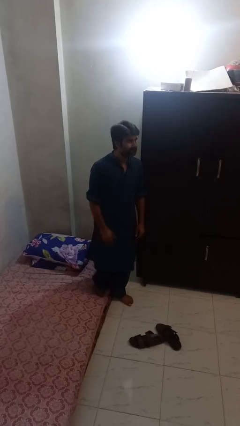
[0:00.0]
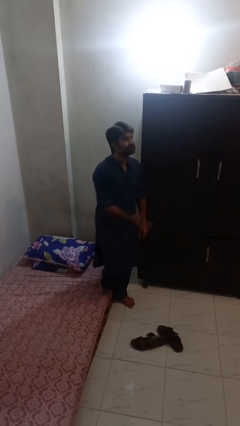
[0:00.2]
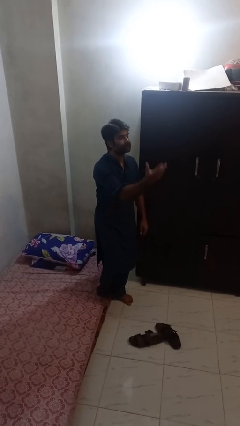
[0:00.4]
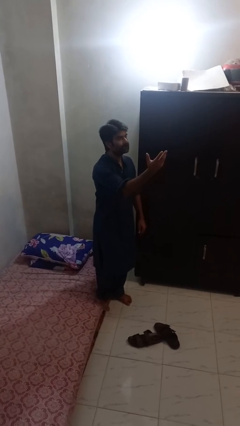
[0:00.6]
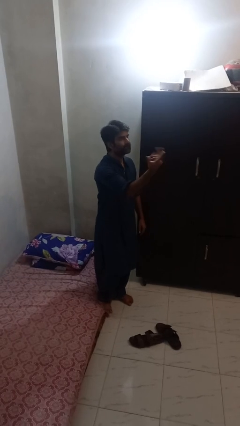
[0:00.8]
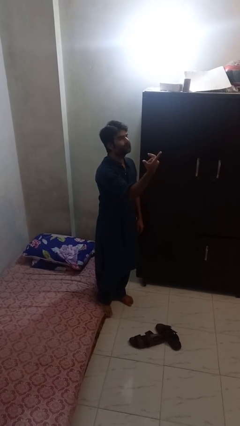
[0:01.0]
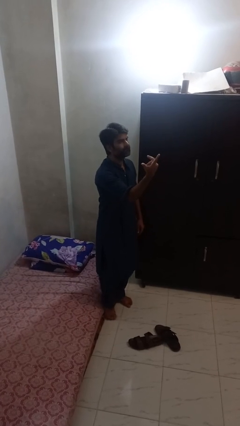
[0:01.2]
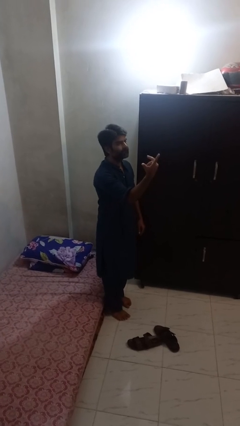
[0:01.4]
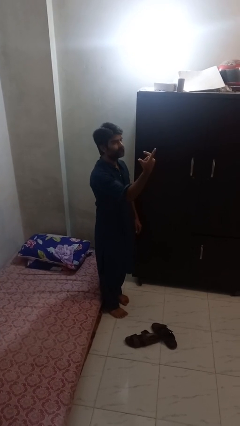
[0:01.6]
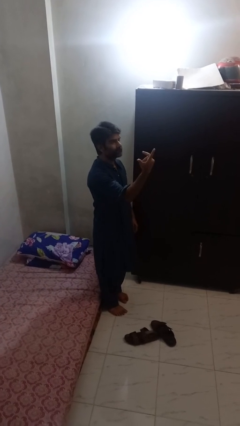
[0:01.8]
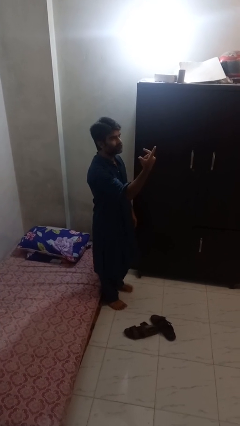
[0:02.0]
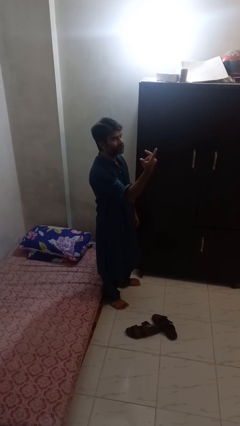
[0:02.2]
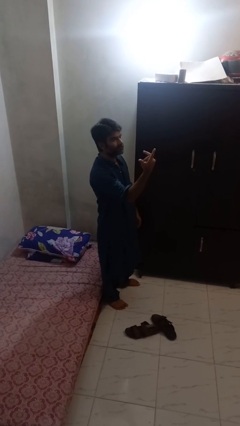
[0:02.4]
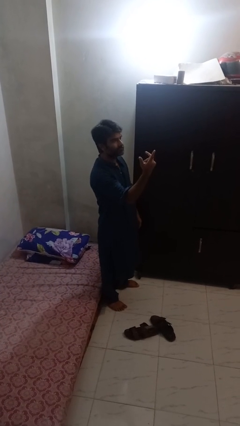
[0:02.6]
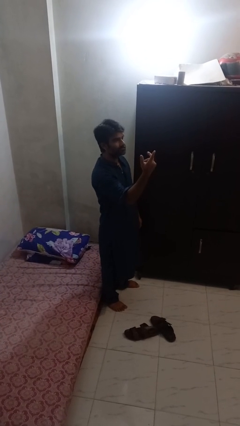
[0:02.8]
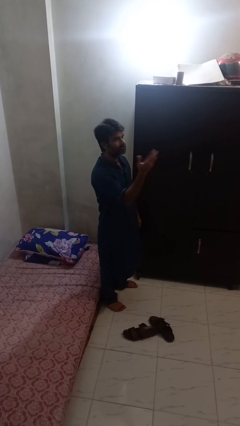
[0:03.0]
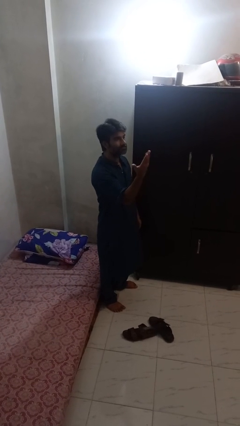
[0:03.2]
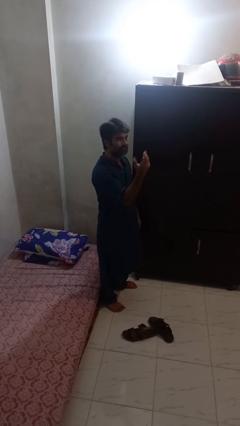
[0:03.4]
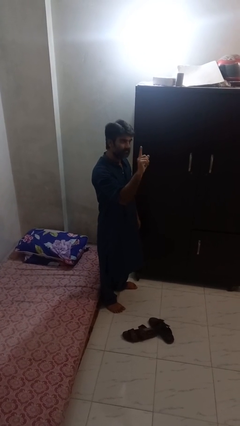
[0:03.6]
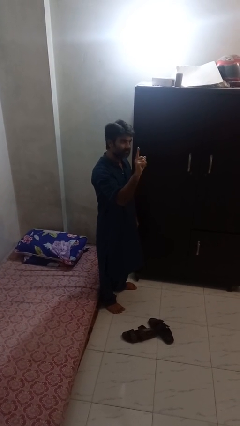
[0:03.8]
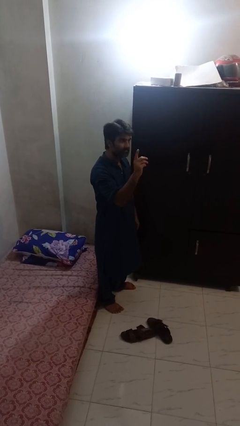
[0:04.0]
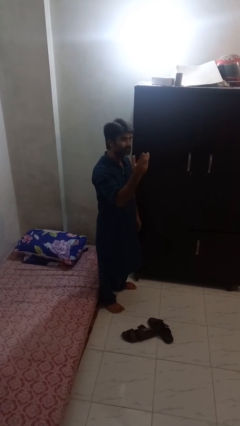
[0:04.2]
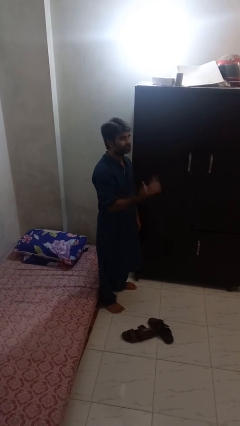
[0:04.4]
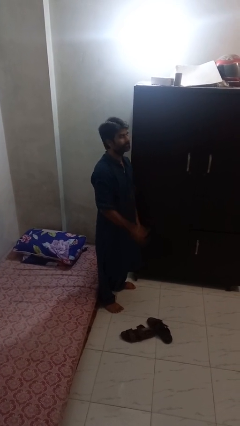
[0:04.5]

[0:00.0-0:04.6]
person gestures raise hand

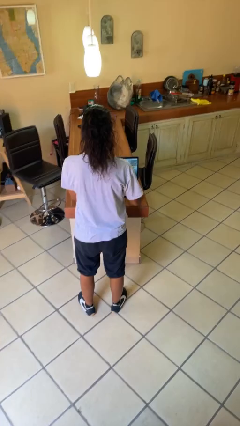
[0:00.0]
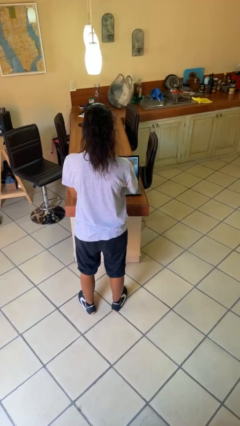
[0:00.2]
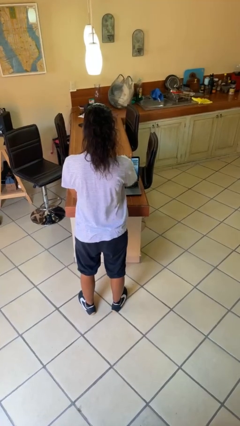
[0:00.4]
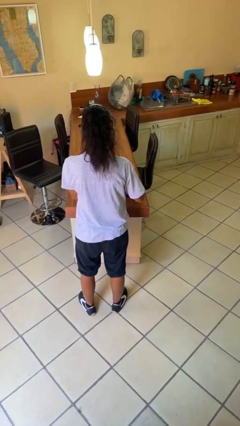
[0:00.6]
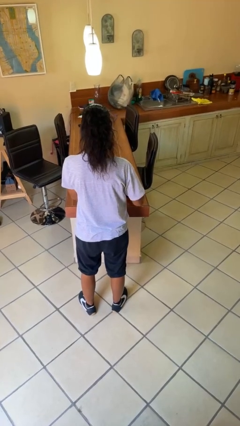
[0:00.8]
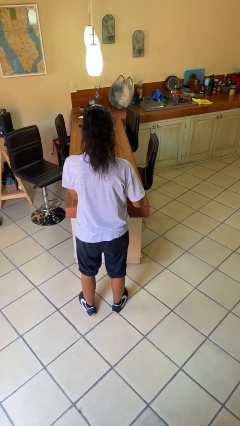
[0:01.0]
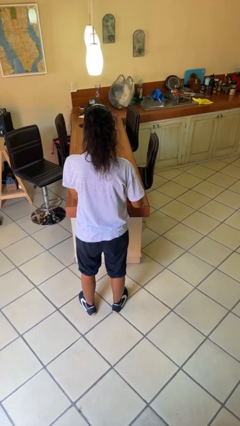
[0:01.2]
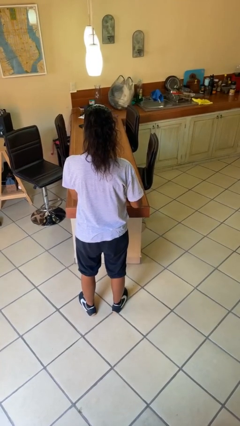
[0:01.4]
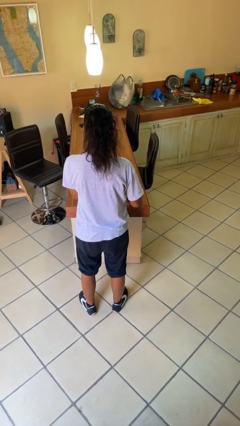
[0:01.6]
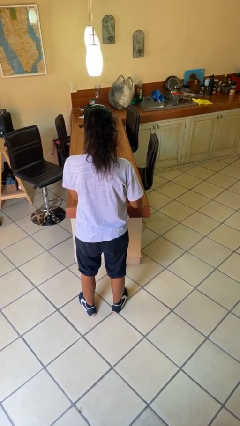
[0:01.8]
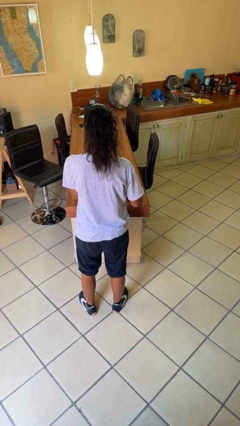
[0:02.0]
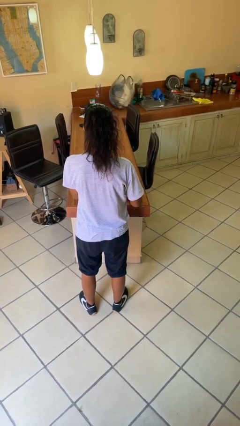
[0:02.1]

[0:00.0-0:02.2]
person closes laptop

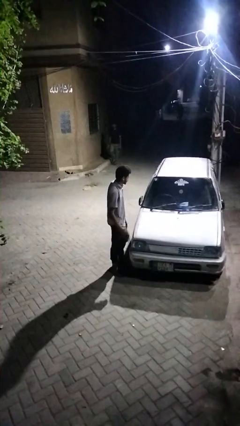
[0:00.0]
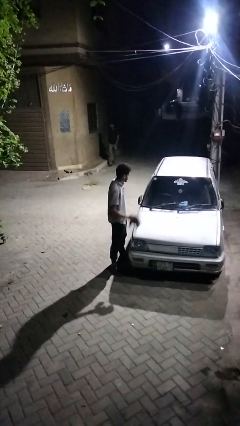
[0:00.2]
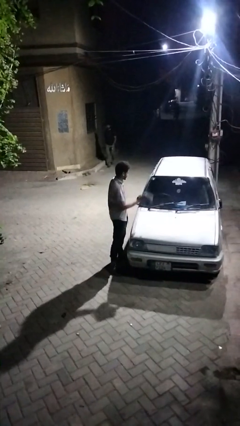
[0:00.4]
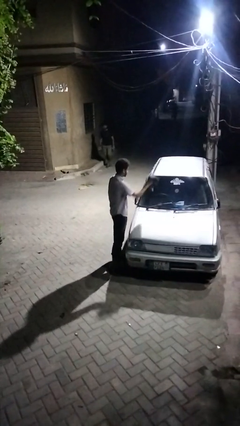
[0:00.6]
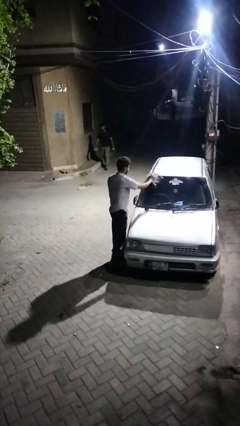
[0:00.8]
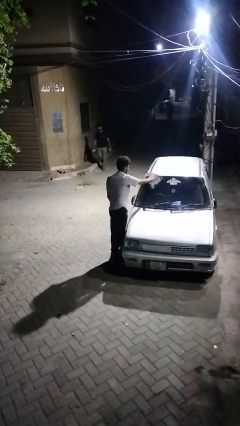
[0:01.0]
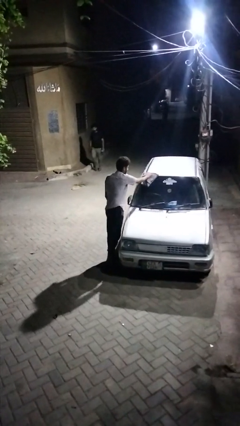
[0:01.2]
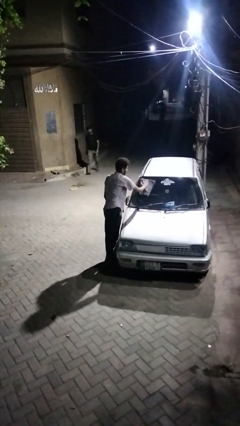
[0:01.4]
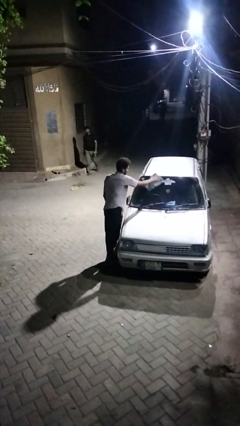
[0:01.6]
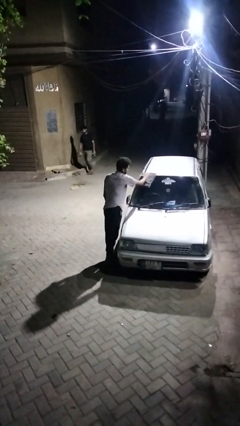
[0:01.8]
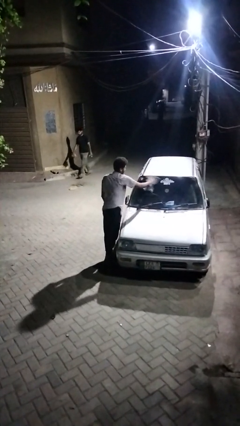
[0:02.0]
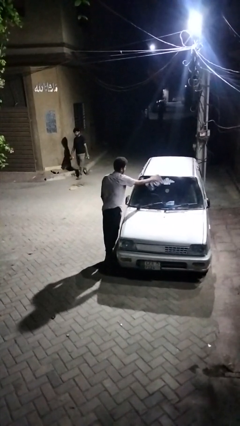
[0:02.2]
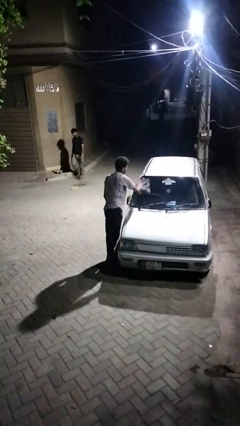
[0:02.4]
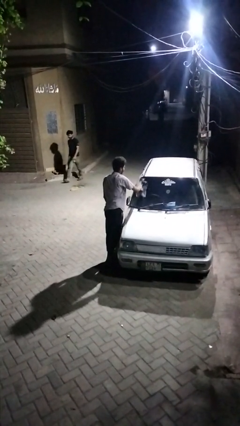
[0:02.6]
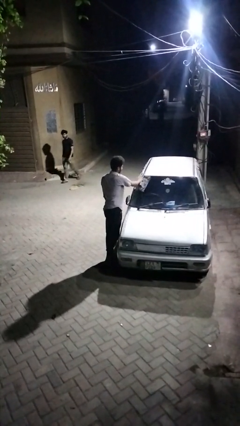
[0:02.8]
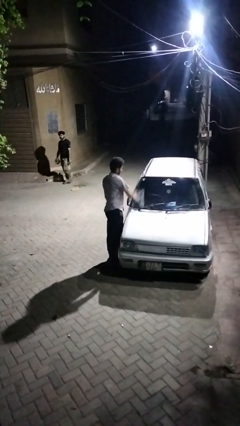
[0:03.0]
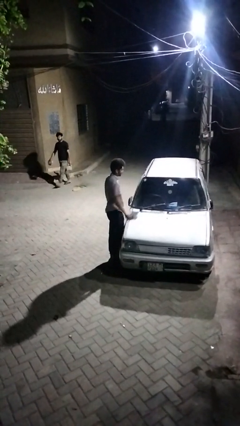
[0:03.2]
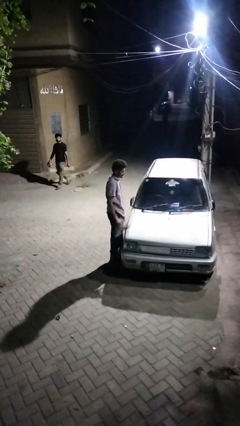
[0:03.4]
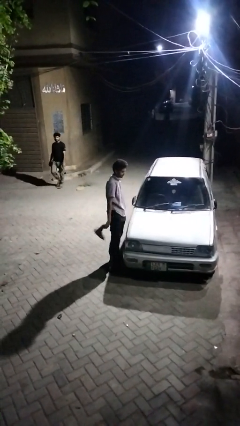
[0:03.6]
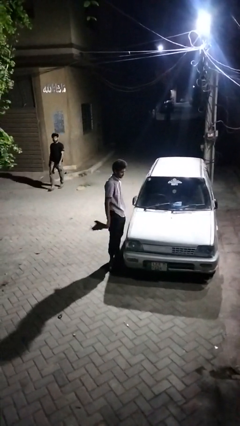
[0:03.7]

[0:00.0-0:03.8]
person polishes car with rag

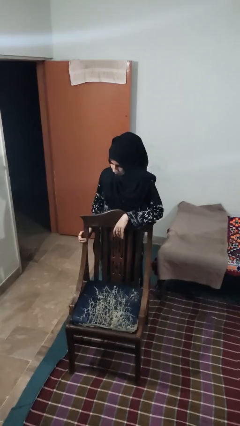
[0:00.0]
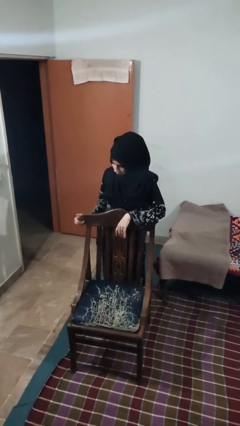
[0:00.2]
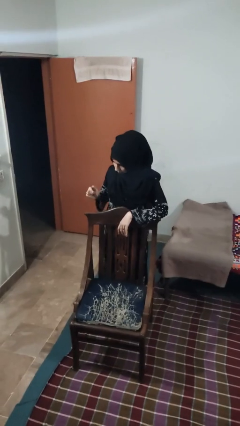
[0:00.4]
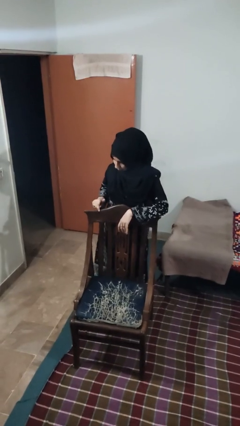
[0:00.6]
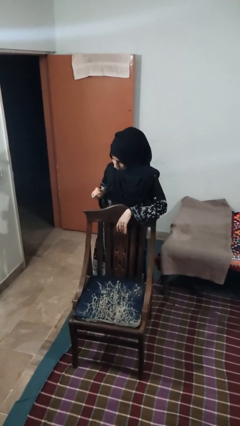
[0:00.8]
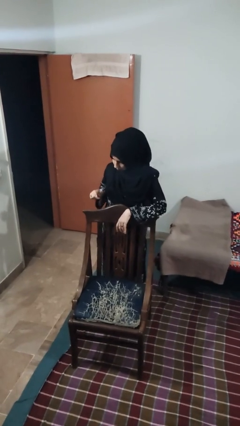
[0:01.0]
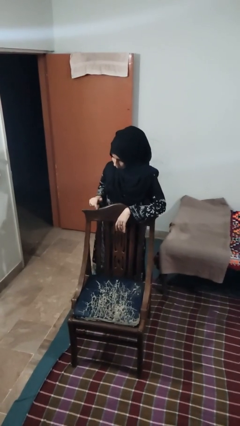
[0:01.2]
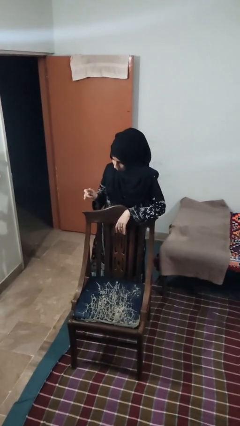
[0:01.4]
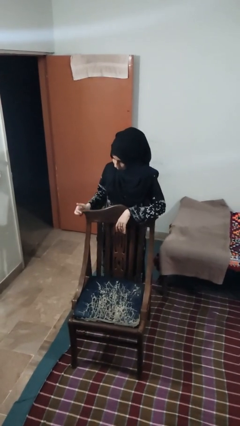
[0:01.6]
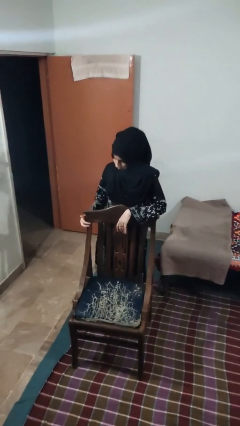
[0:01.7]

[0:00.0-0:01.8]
person taps object with finger

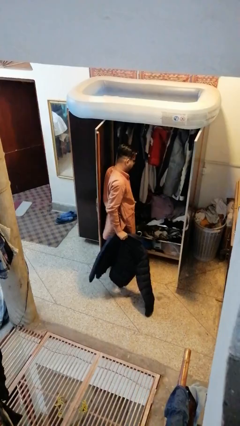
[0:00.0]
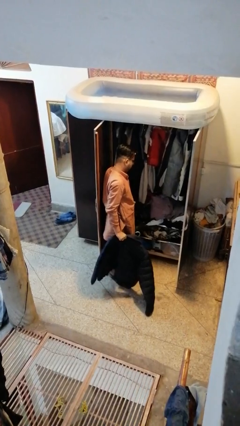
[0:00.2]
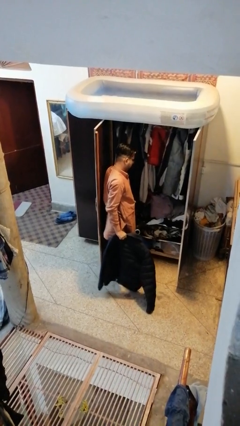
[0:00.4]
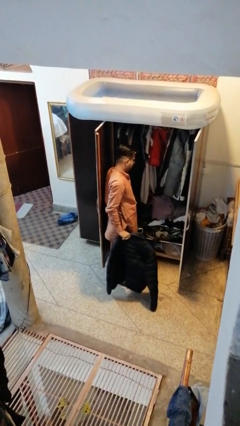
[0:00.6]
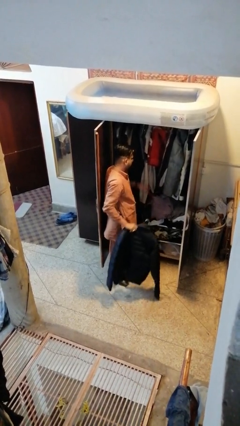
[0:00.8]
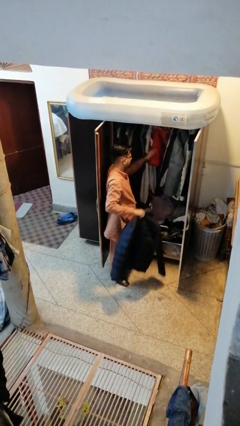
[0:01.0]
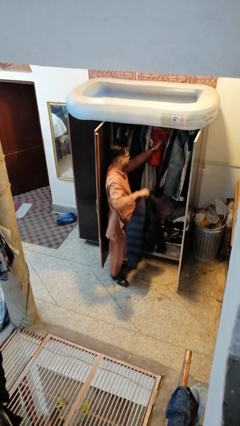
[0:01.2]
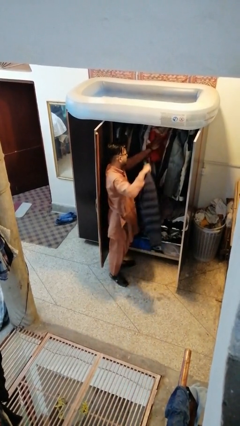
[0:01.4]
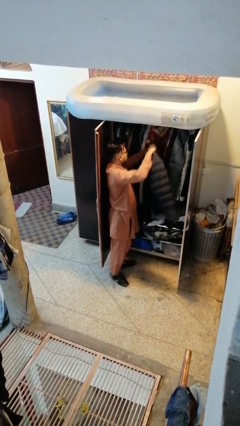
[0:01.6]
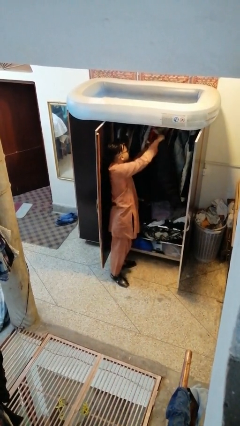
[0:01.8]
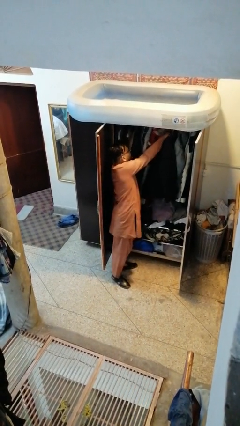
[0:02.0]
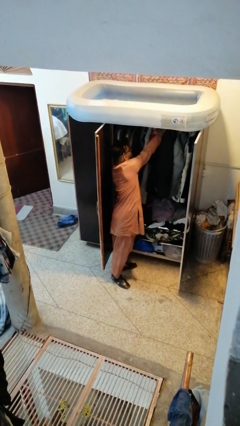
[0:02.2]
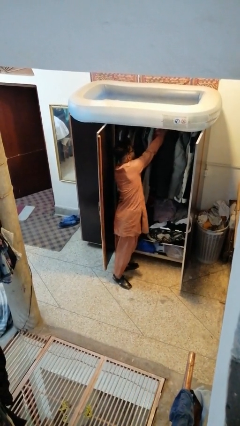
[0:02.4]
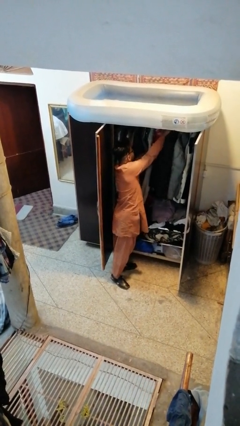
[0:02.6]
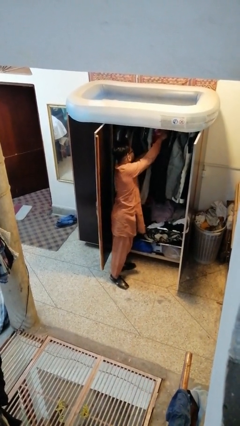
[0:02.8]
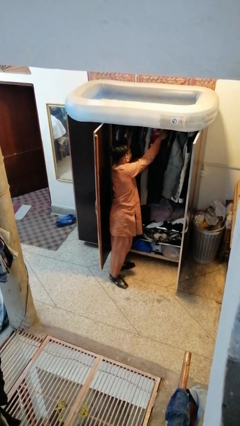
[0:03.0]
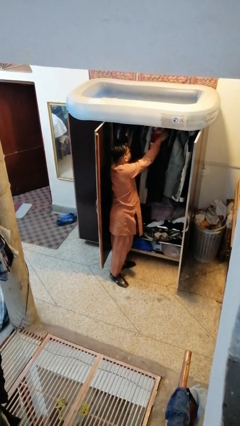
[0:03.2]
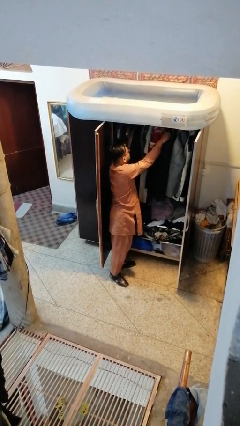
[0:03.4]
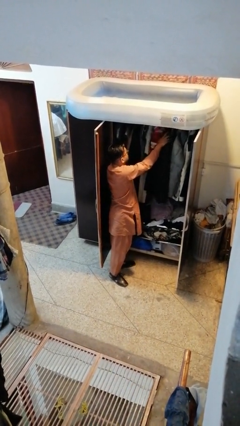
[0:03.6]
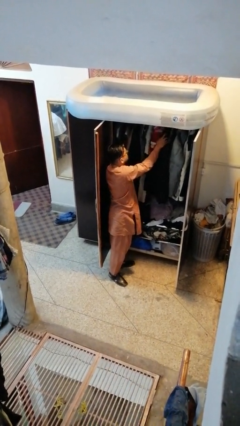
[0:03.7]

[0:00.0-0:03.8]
person puts clothes into closet

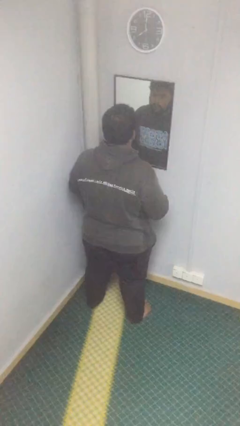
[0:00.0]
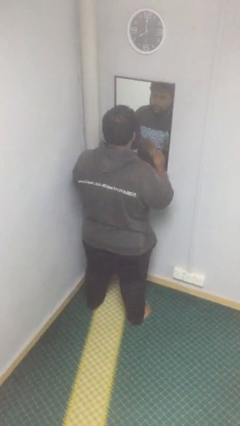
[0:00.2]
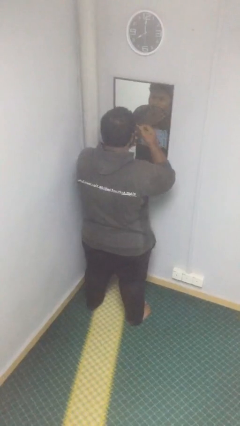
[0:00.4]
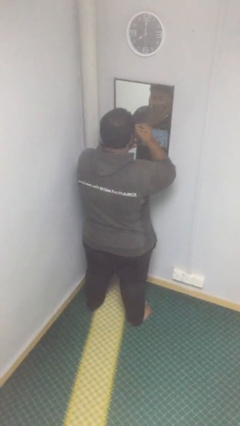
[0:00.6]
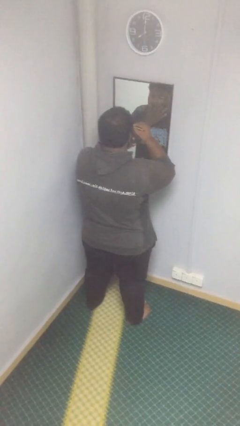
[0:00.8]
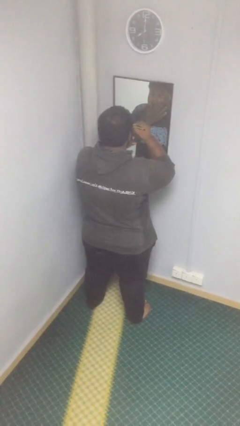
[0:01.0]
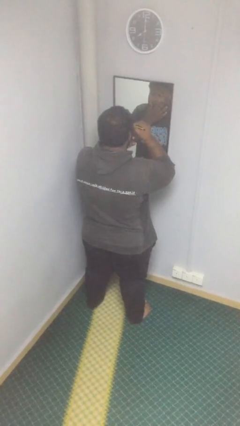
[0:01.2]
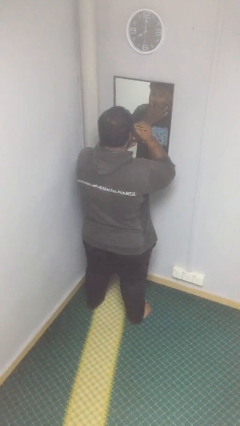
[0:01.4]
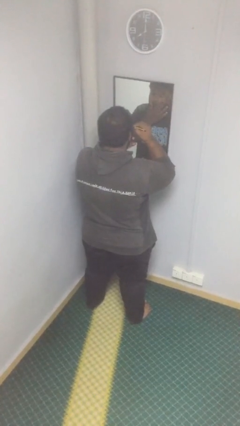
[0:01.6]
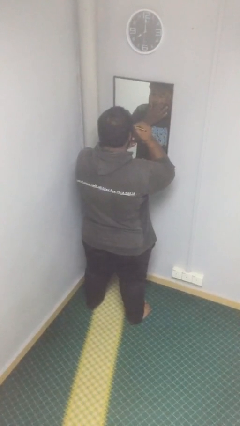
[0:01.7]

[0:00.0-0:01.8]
person applies eye makeup
